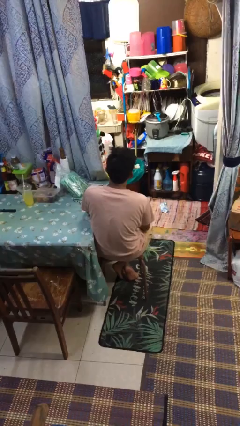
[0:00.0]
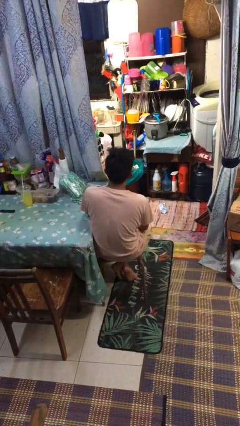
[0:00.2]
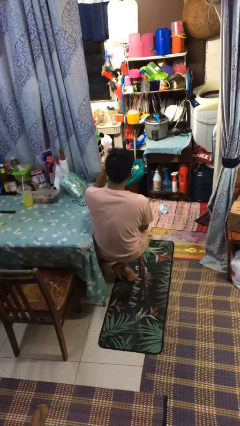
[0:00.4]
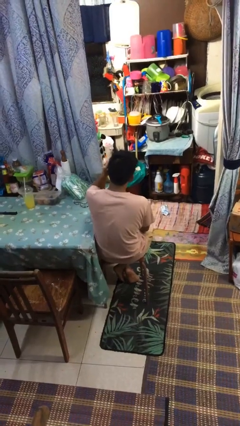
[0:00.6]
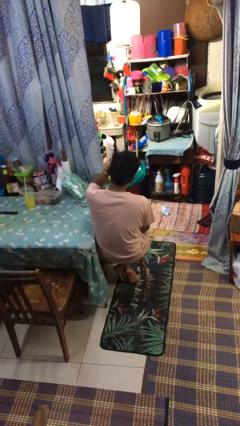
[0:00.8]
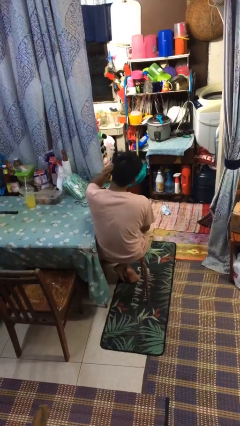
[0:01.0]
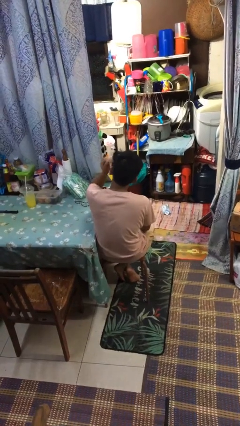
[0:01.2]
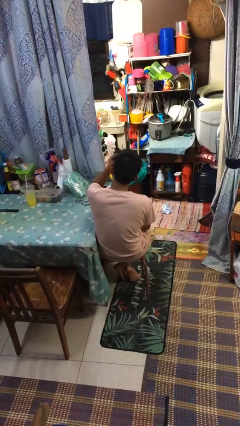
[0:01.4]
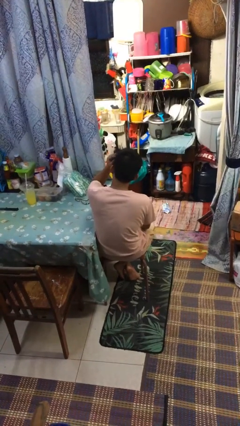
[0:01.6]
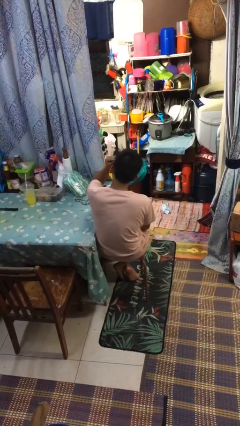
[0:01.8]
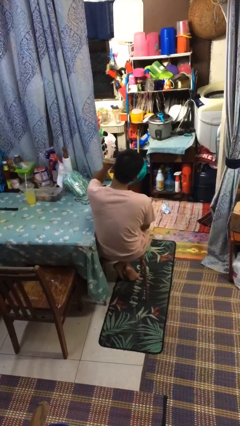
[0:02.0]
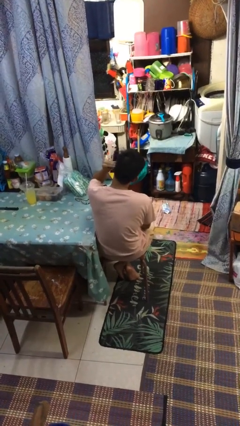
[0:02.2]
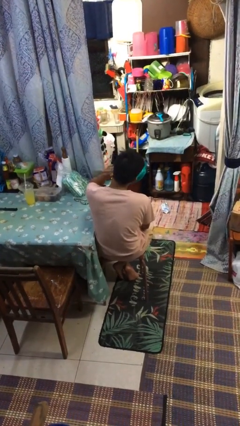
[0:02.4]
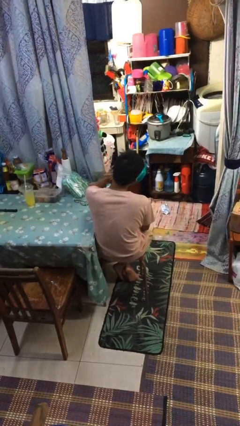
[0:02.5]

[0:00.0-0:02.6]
person strokes hair

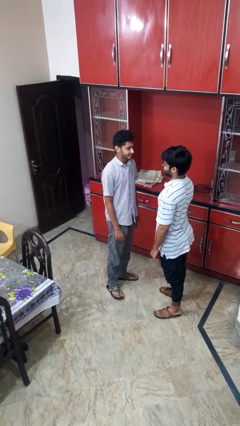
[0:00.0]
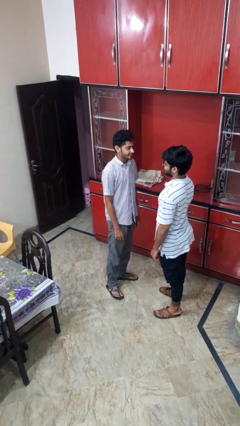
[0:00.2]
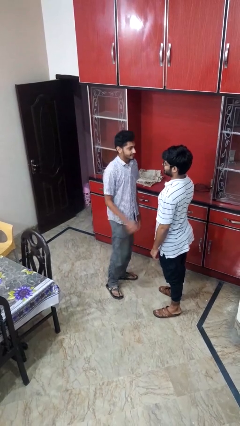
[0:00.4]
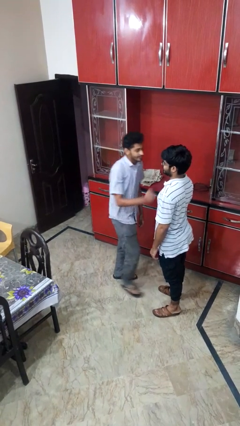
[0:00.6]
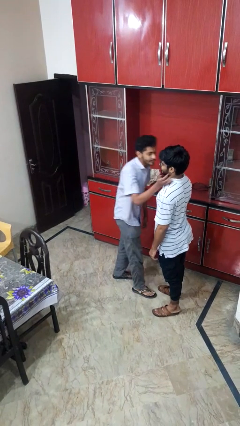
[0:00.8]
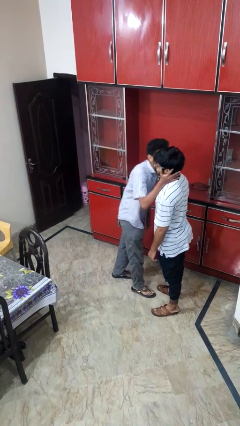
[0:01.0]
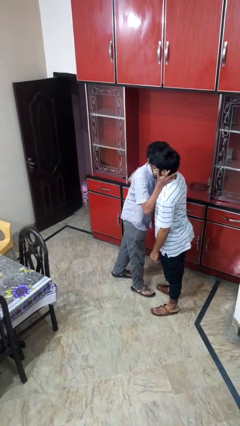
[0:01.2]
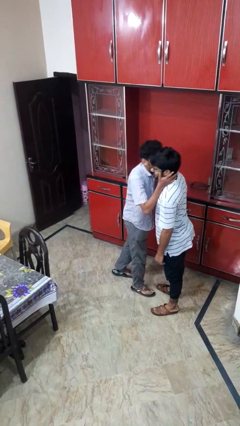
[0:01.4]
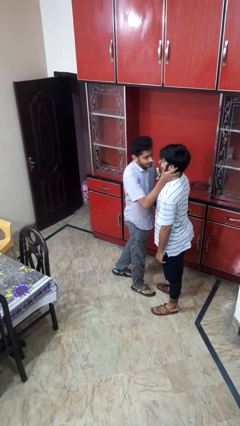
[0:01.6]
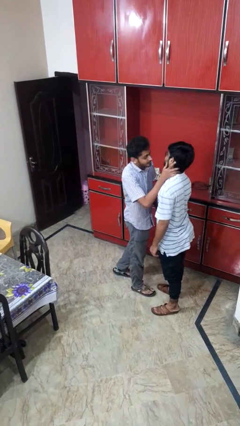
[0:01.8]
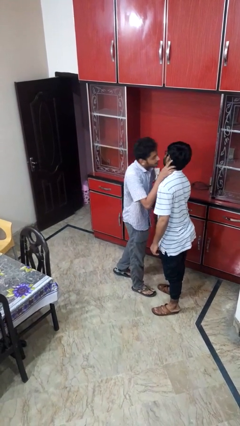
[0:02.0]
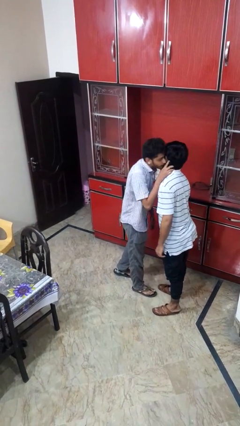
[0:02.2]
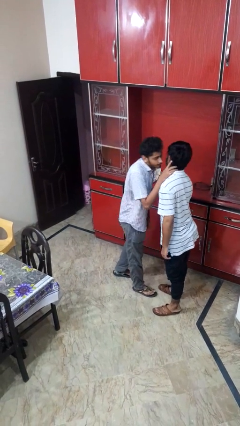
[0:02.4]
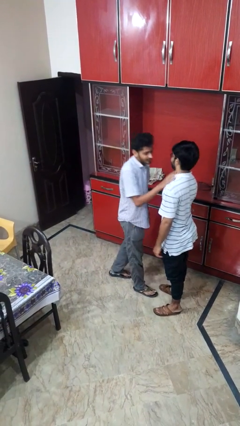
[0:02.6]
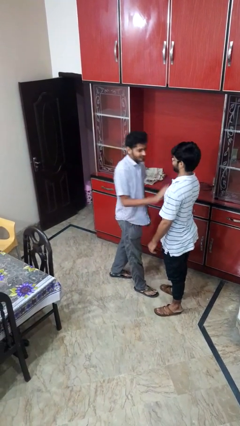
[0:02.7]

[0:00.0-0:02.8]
person kisses cheek of person

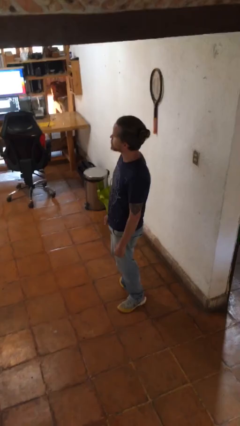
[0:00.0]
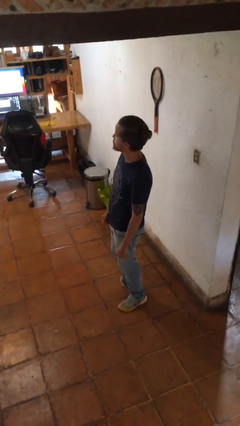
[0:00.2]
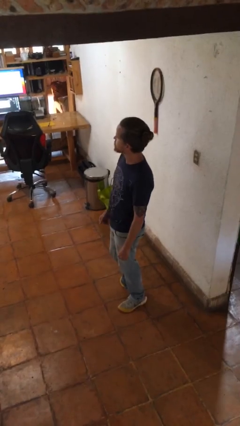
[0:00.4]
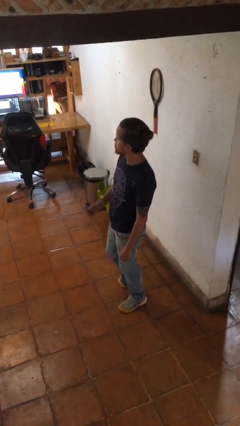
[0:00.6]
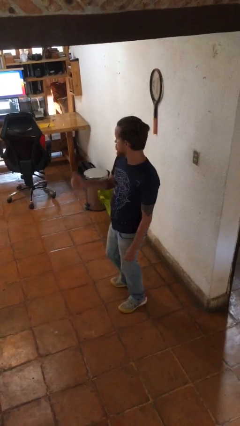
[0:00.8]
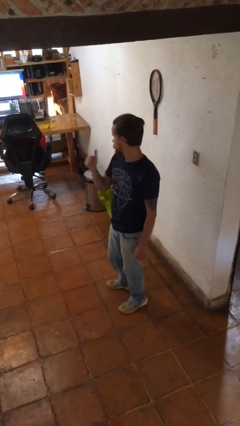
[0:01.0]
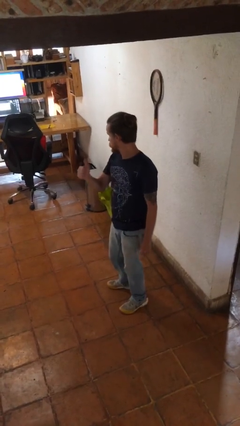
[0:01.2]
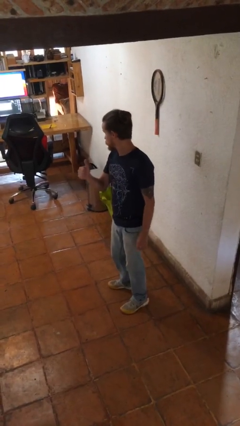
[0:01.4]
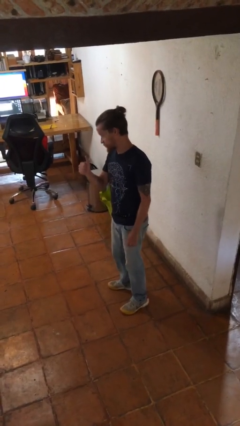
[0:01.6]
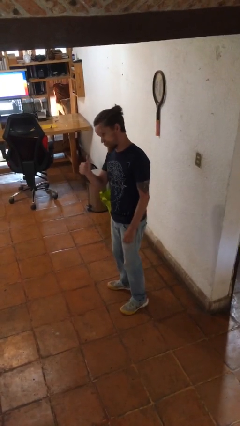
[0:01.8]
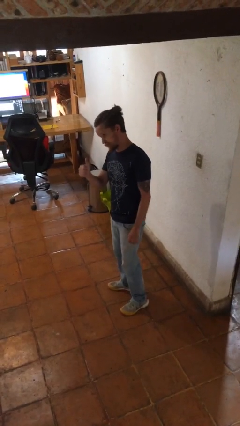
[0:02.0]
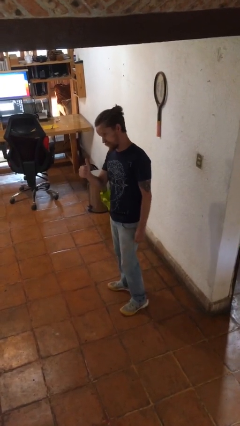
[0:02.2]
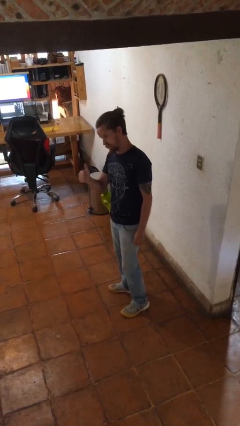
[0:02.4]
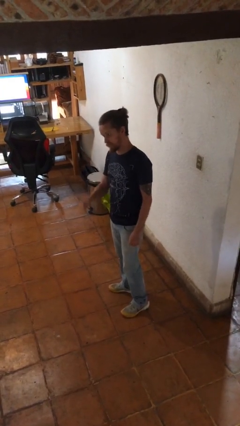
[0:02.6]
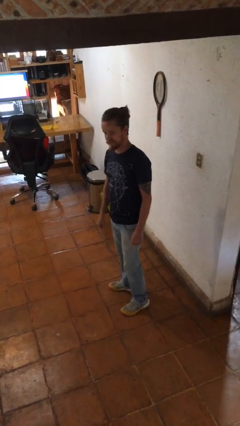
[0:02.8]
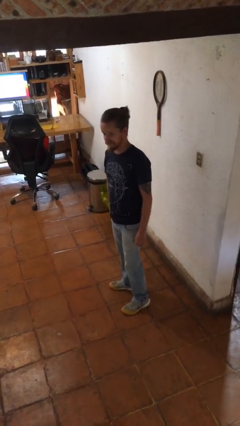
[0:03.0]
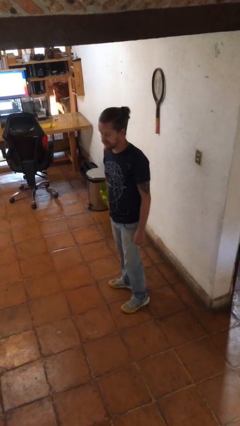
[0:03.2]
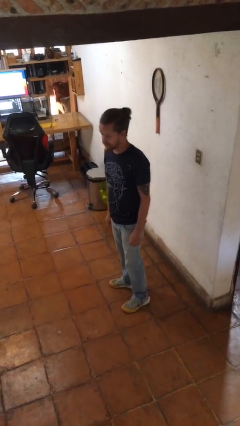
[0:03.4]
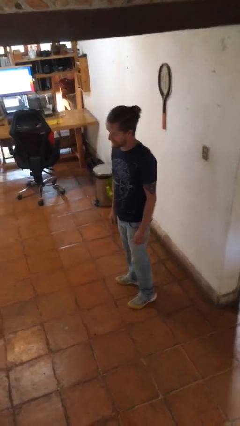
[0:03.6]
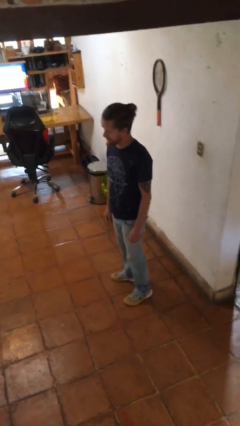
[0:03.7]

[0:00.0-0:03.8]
person gestures thumbs up

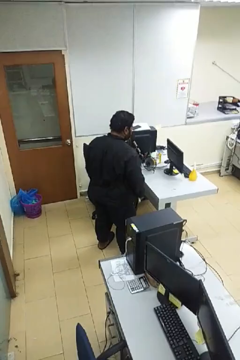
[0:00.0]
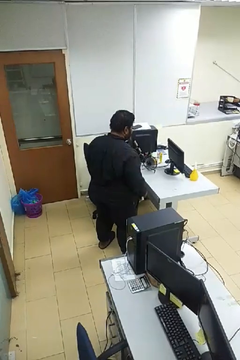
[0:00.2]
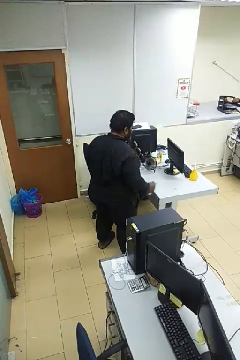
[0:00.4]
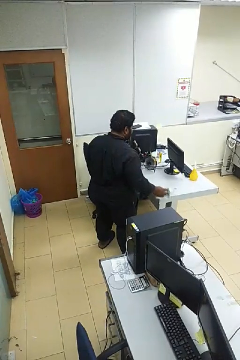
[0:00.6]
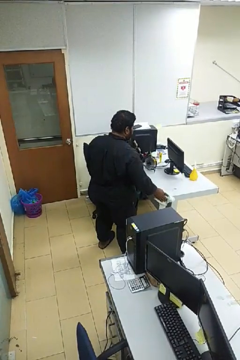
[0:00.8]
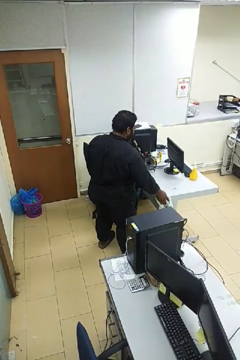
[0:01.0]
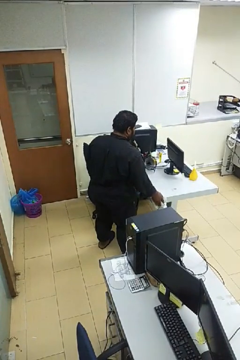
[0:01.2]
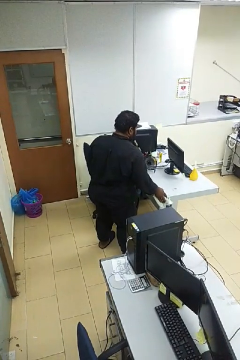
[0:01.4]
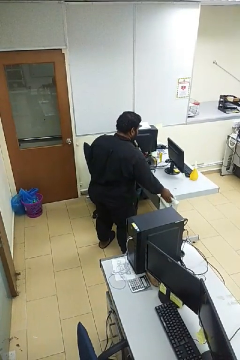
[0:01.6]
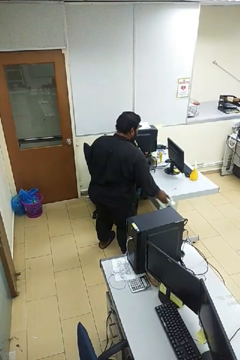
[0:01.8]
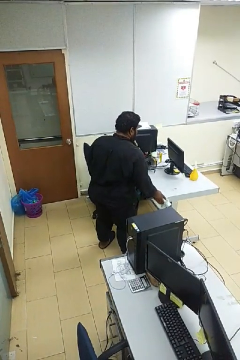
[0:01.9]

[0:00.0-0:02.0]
person cleans table with rag

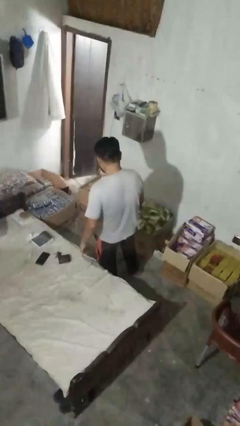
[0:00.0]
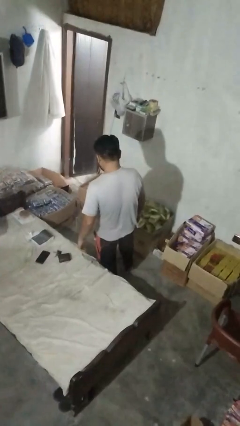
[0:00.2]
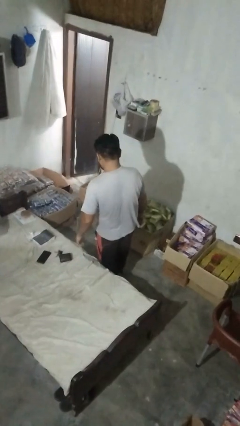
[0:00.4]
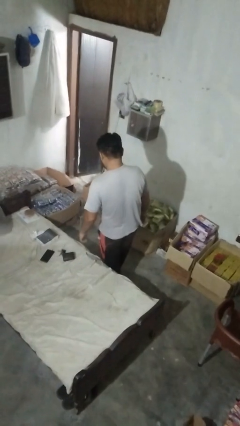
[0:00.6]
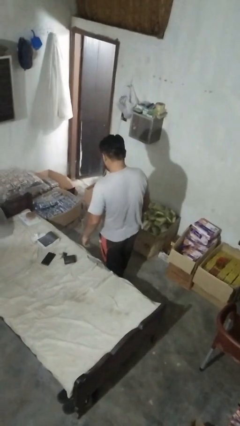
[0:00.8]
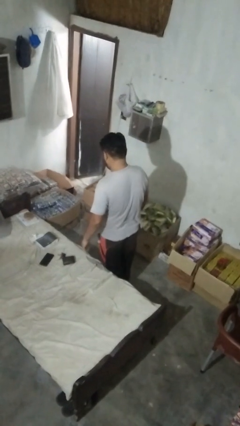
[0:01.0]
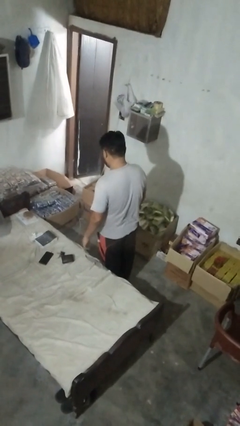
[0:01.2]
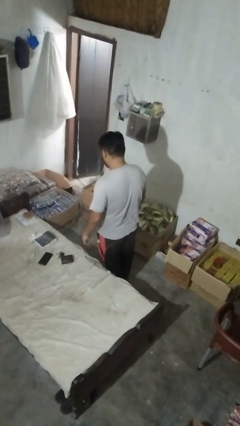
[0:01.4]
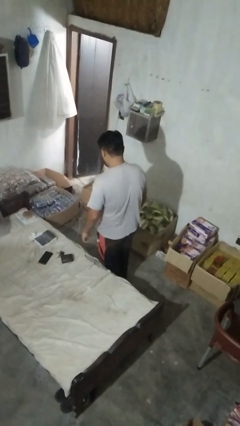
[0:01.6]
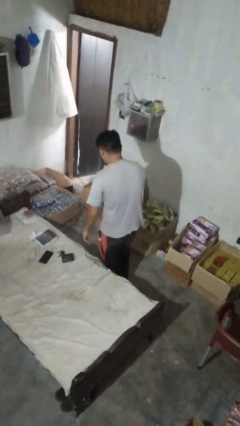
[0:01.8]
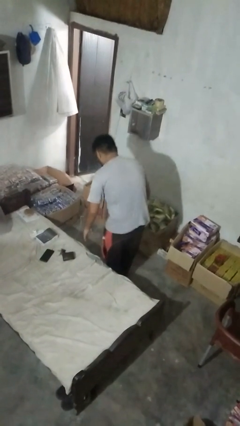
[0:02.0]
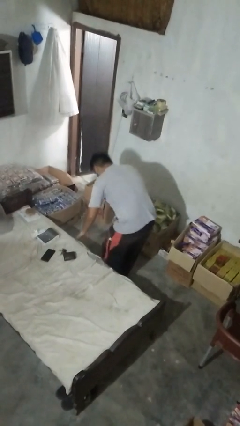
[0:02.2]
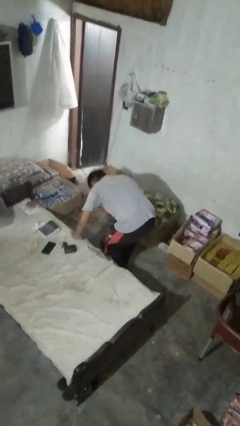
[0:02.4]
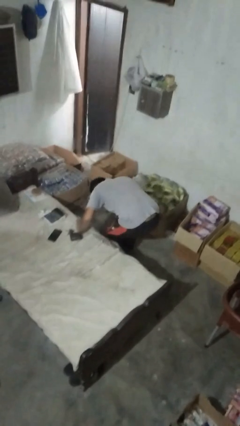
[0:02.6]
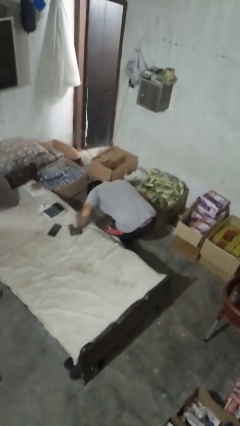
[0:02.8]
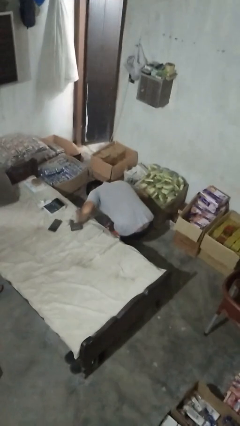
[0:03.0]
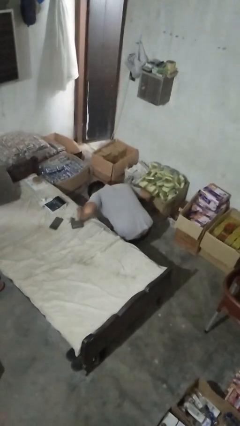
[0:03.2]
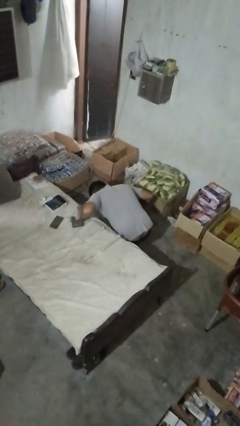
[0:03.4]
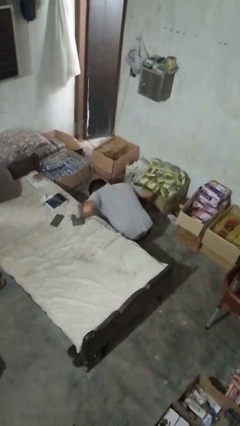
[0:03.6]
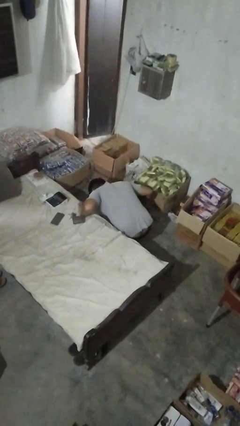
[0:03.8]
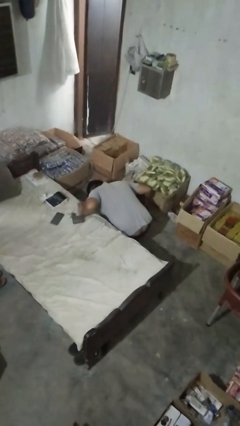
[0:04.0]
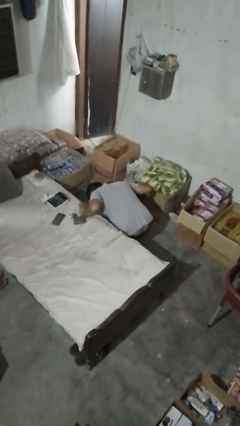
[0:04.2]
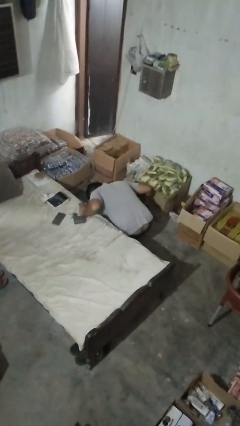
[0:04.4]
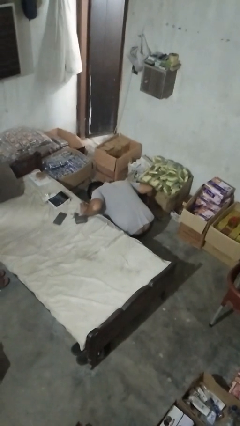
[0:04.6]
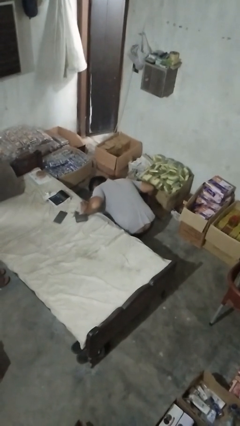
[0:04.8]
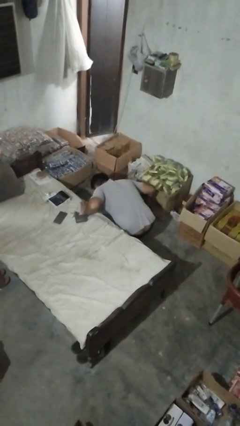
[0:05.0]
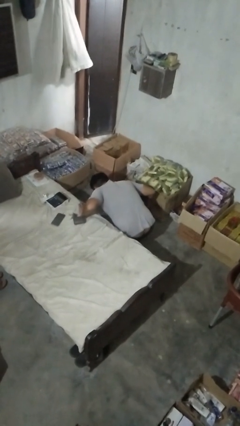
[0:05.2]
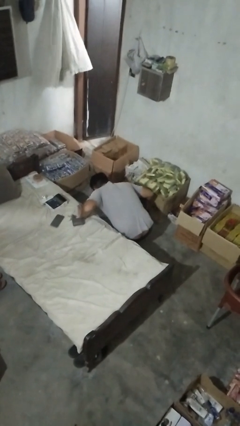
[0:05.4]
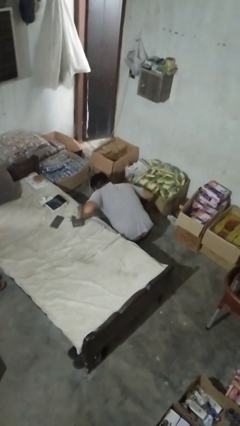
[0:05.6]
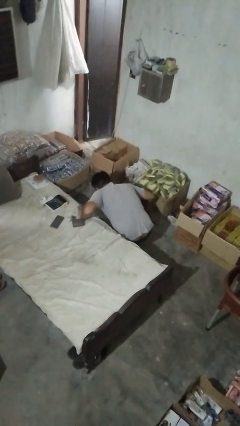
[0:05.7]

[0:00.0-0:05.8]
person searches under couch

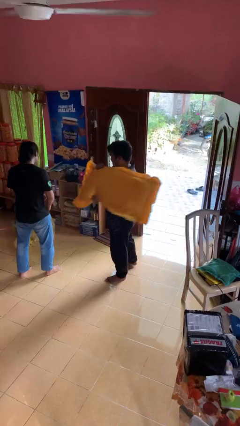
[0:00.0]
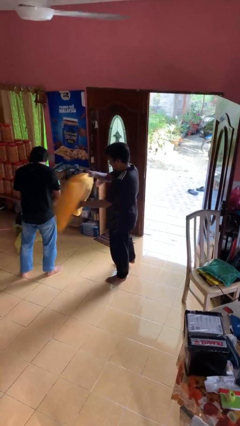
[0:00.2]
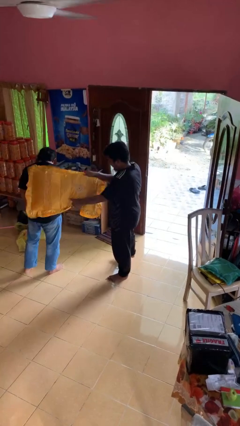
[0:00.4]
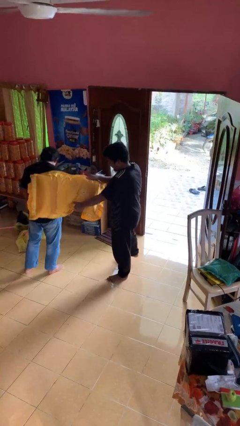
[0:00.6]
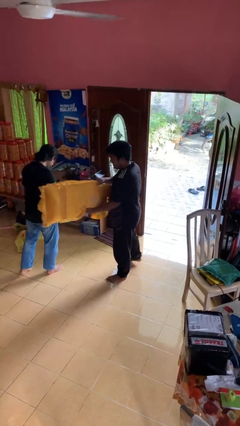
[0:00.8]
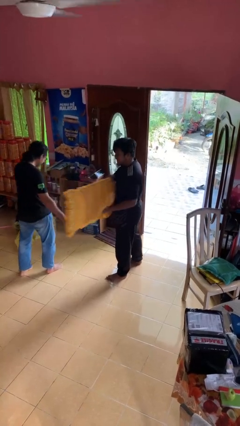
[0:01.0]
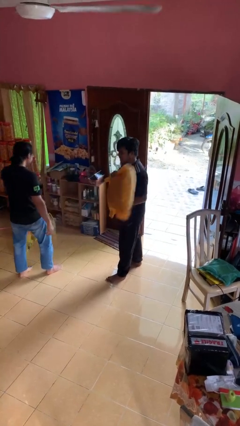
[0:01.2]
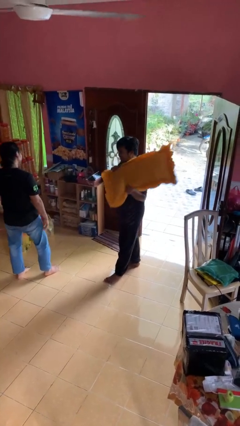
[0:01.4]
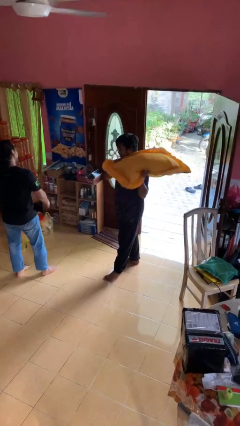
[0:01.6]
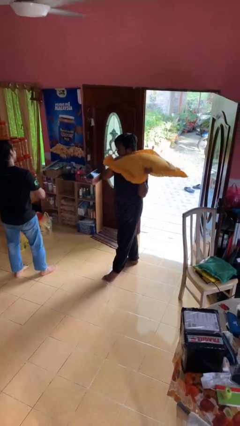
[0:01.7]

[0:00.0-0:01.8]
person hits person with pillow
